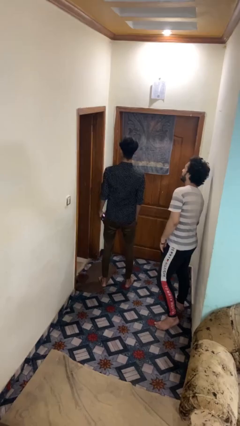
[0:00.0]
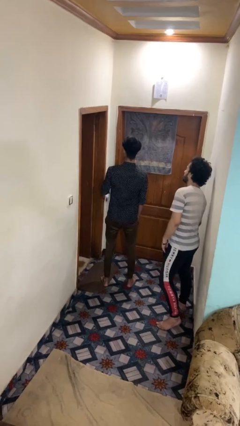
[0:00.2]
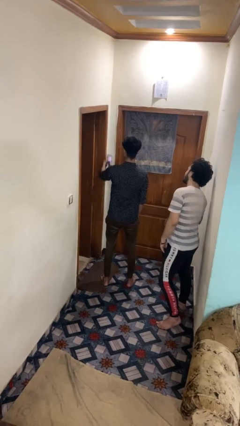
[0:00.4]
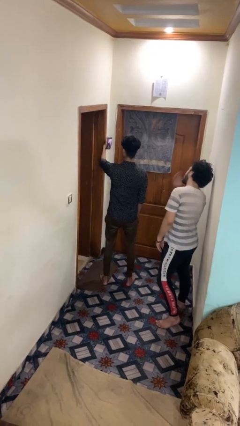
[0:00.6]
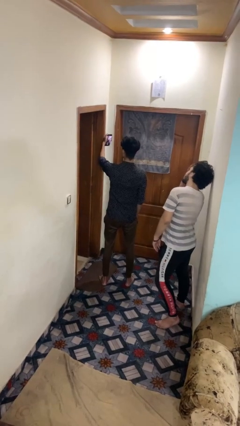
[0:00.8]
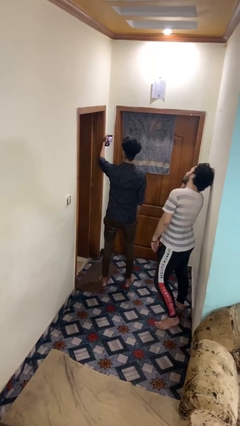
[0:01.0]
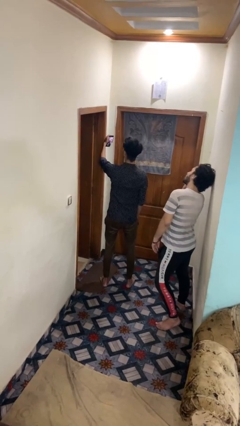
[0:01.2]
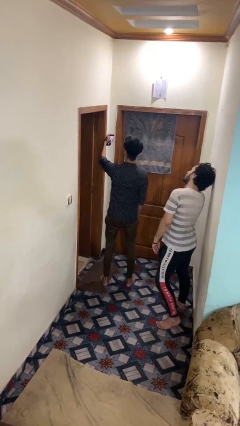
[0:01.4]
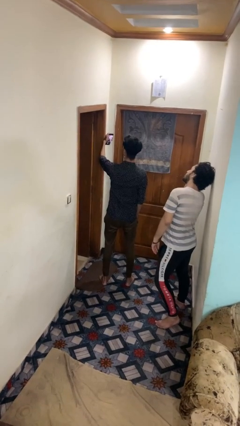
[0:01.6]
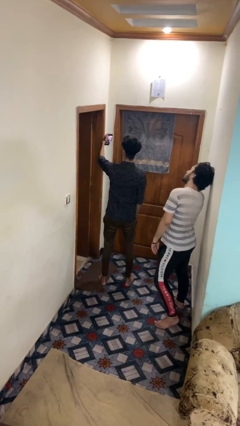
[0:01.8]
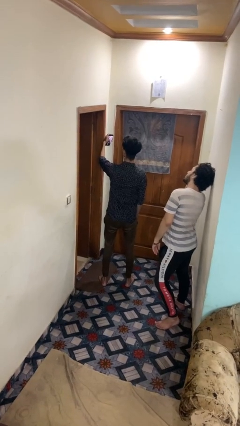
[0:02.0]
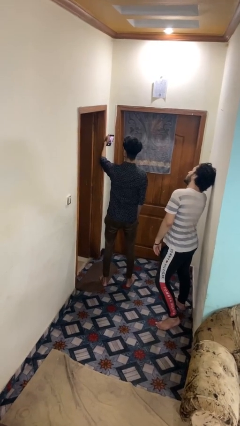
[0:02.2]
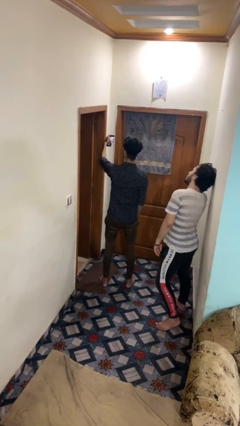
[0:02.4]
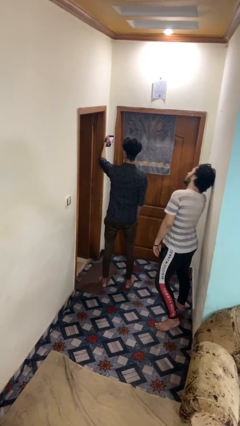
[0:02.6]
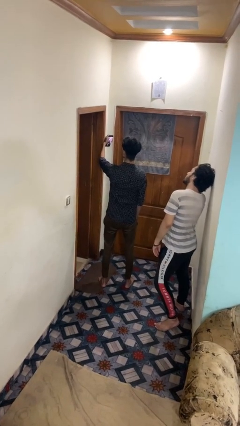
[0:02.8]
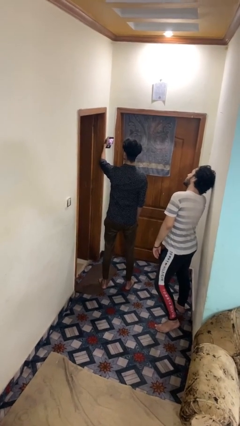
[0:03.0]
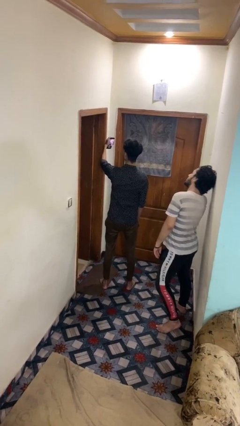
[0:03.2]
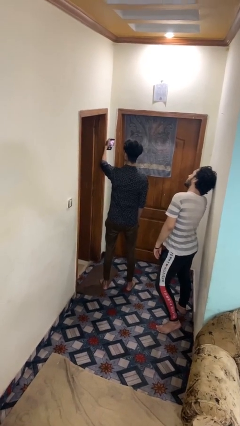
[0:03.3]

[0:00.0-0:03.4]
person takes selfie with person

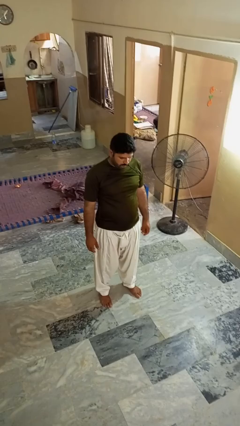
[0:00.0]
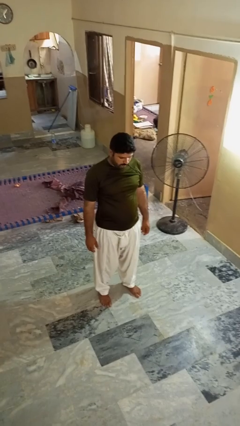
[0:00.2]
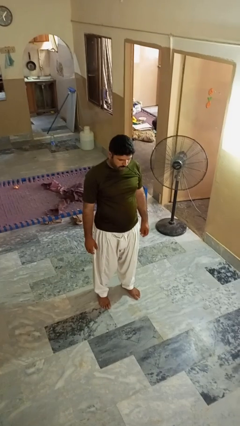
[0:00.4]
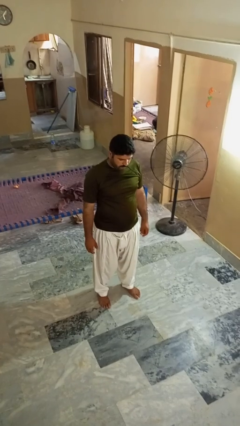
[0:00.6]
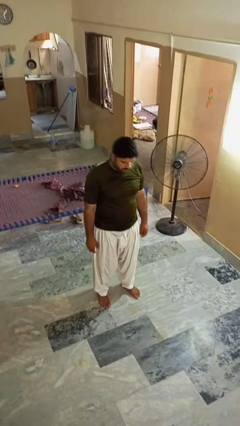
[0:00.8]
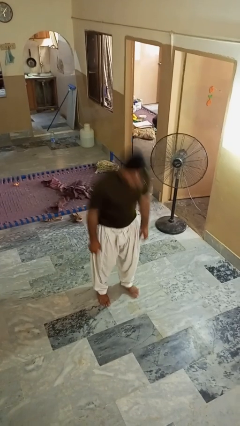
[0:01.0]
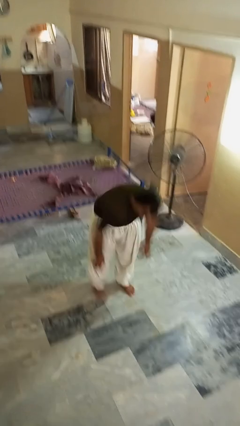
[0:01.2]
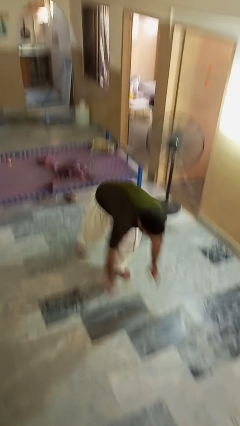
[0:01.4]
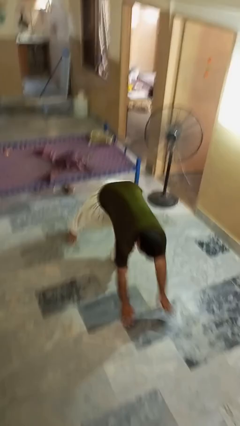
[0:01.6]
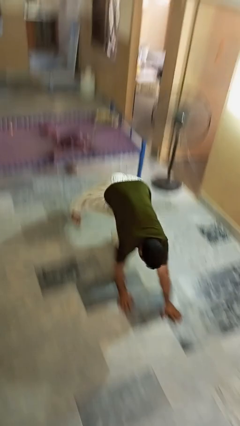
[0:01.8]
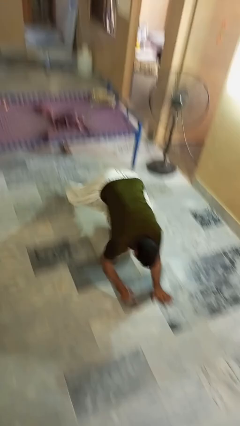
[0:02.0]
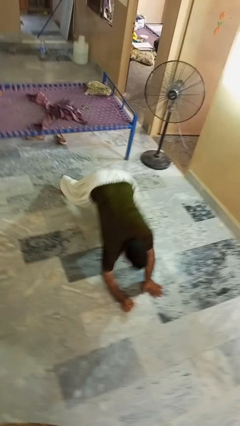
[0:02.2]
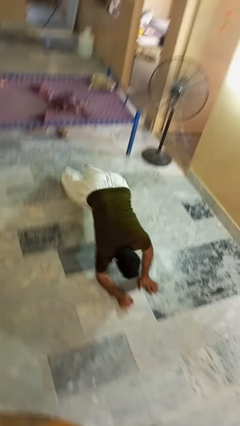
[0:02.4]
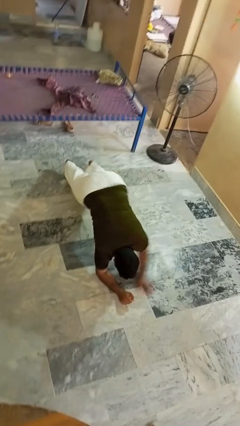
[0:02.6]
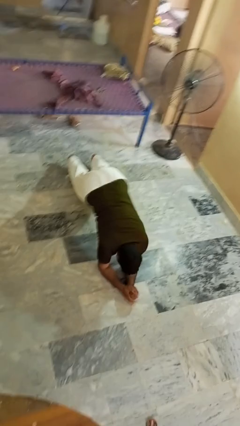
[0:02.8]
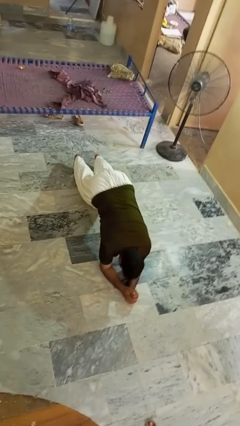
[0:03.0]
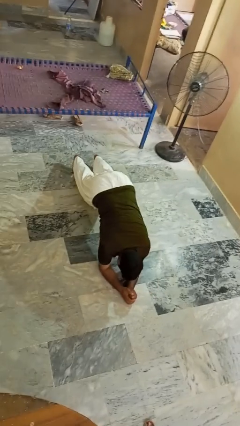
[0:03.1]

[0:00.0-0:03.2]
person exercises with plank

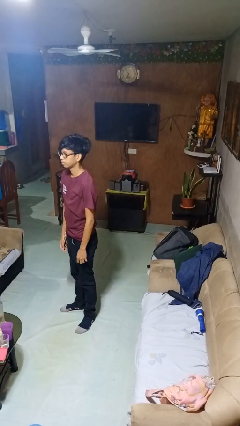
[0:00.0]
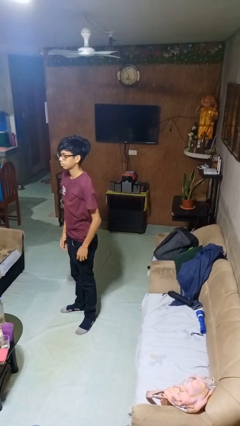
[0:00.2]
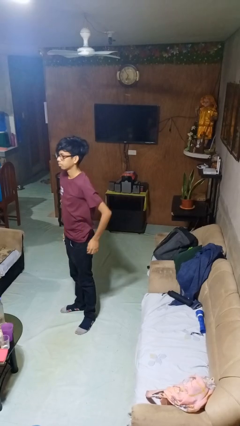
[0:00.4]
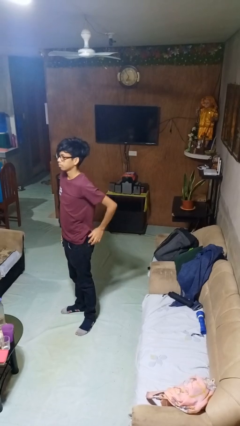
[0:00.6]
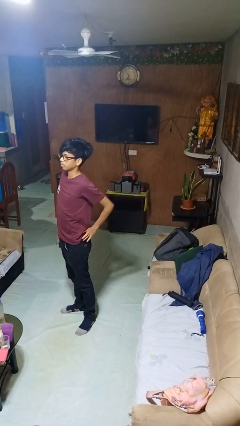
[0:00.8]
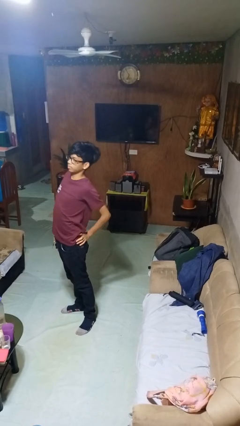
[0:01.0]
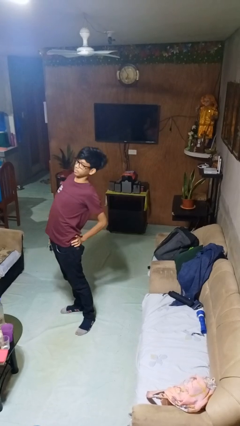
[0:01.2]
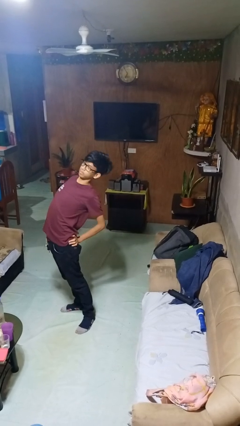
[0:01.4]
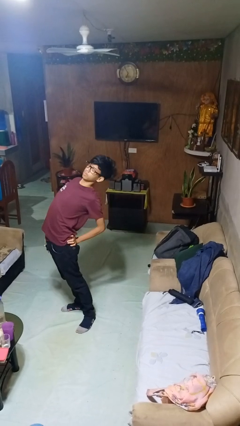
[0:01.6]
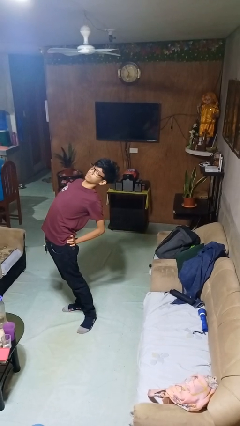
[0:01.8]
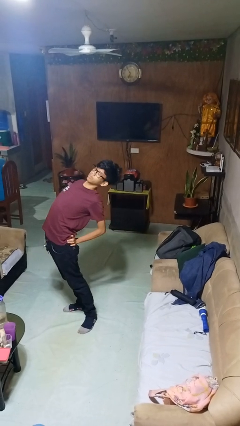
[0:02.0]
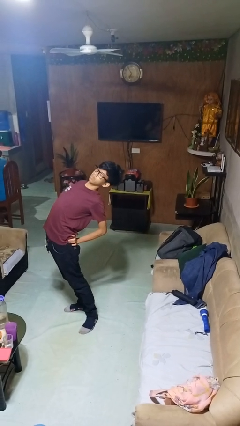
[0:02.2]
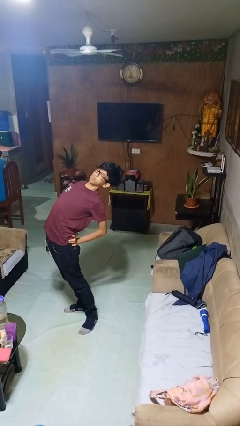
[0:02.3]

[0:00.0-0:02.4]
person stretches back

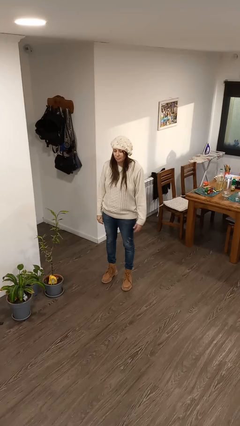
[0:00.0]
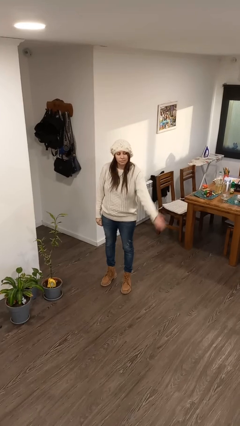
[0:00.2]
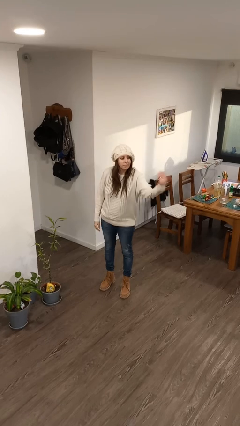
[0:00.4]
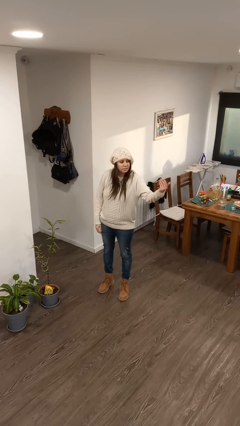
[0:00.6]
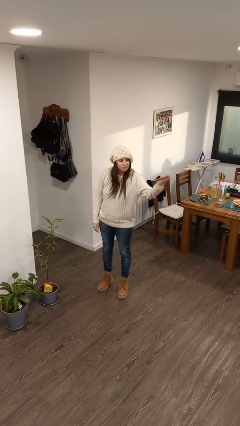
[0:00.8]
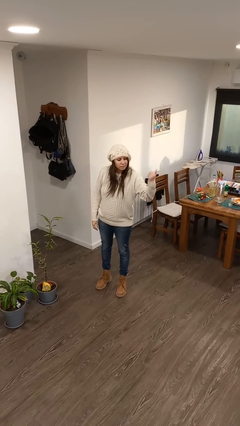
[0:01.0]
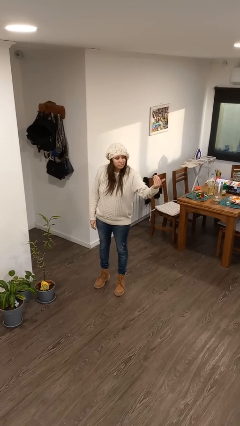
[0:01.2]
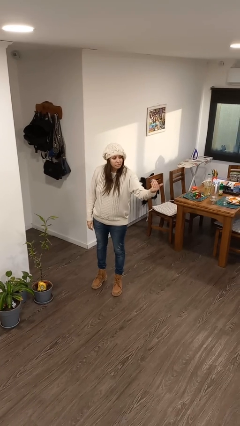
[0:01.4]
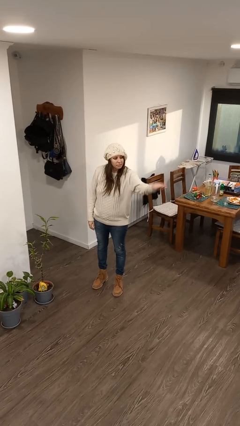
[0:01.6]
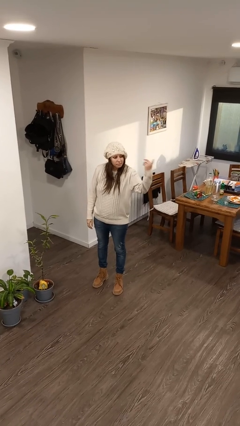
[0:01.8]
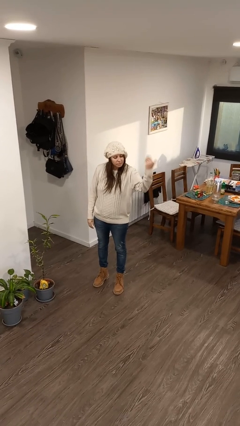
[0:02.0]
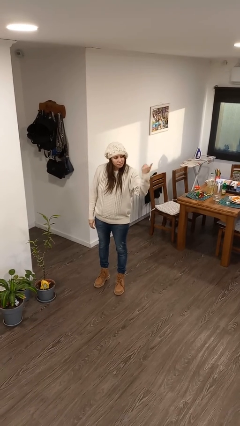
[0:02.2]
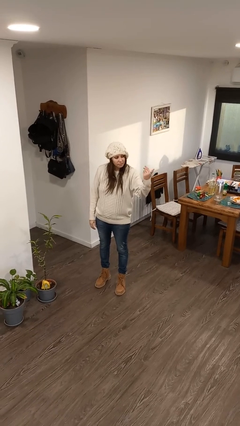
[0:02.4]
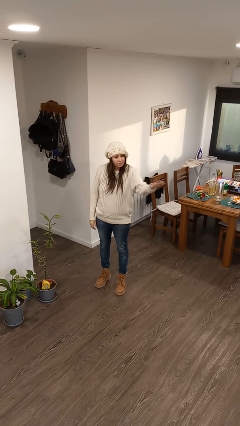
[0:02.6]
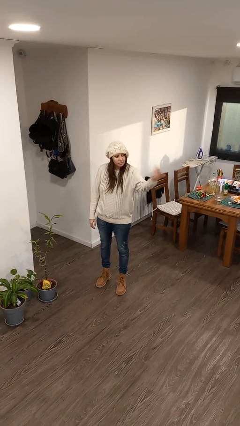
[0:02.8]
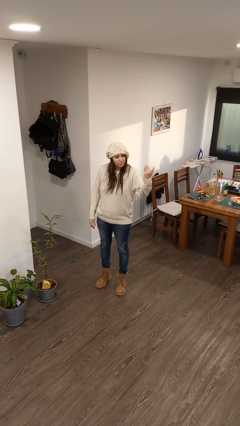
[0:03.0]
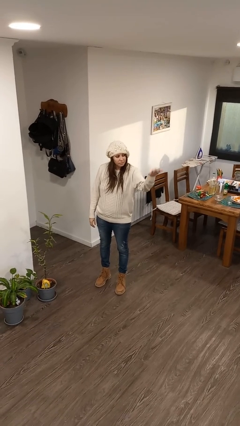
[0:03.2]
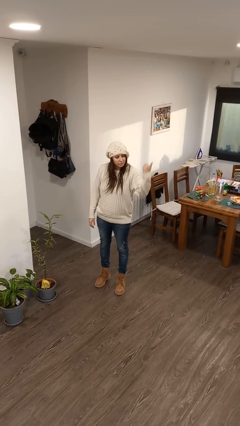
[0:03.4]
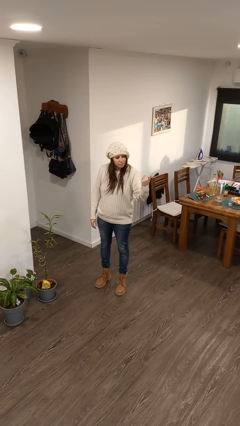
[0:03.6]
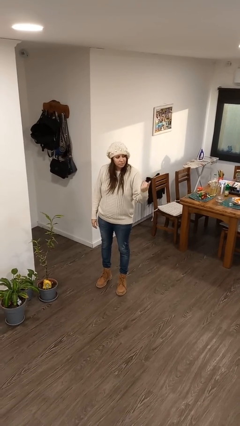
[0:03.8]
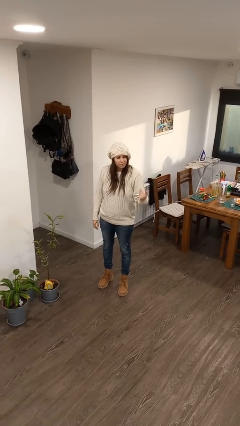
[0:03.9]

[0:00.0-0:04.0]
person gestures come here

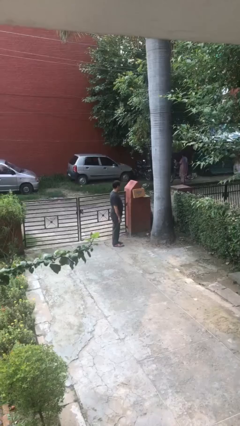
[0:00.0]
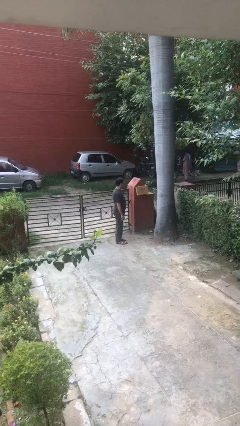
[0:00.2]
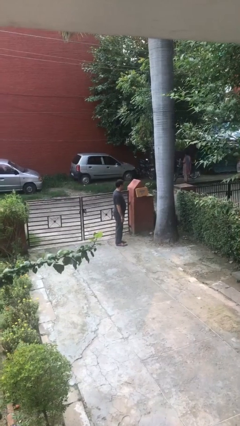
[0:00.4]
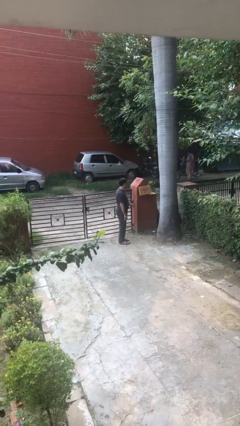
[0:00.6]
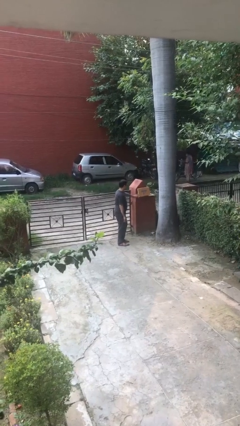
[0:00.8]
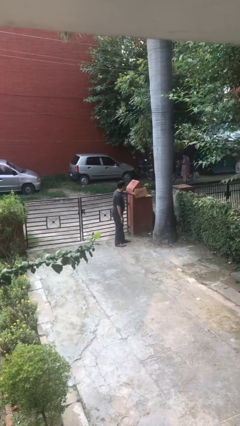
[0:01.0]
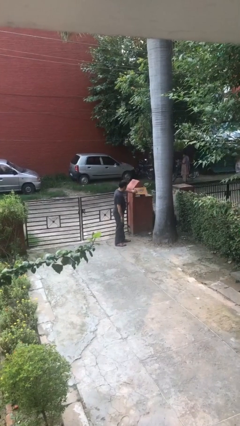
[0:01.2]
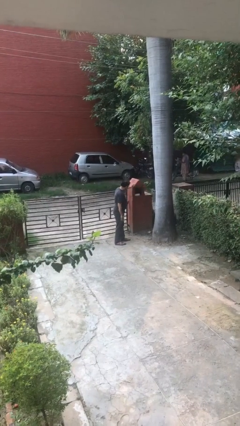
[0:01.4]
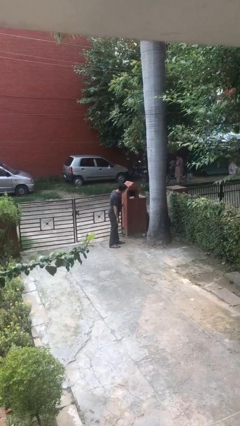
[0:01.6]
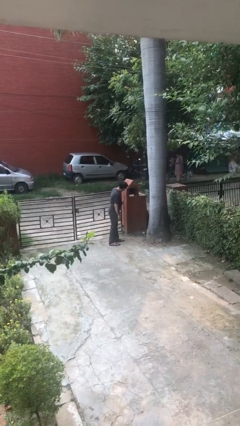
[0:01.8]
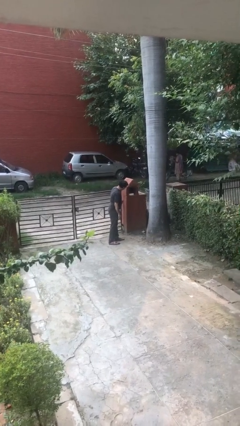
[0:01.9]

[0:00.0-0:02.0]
person opens mailbox

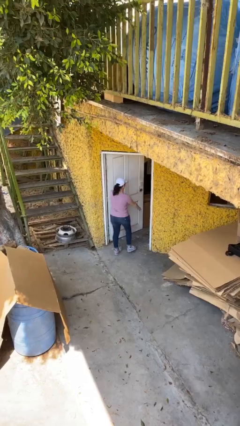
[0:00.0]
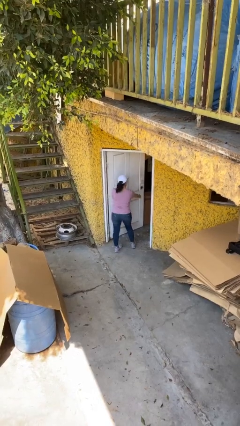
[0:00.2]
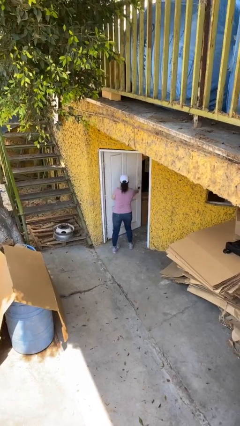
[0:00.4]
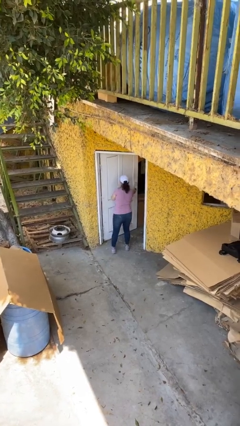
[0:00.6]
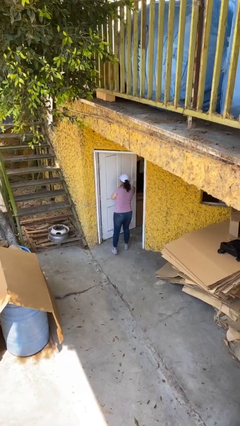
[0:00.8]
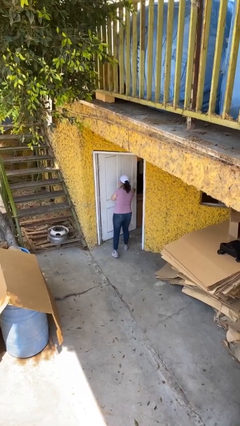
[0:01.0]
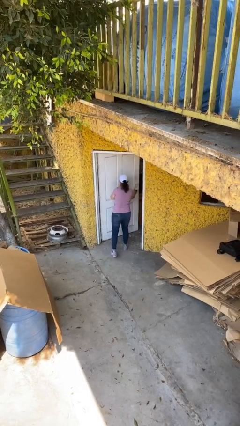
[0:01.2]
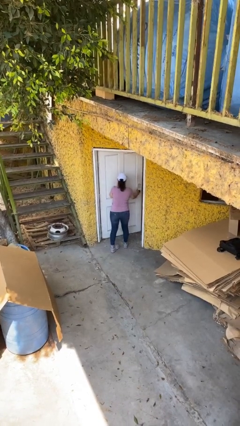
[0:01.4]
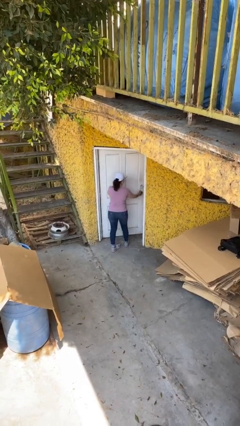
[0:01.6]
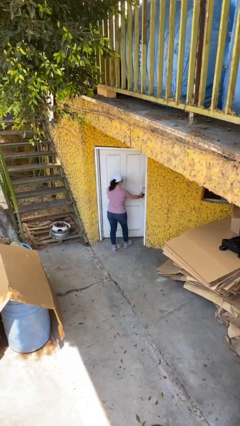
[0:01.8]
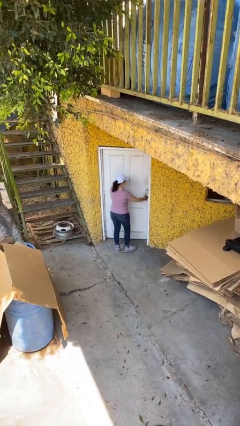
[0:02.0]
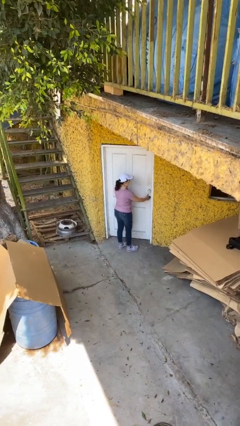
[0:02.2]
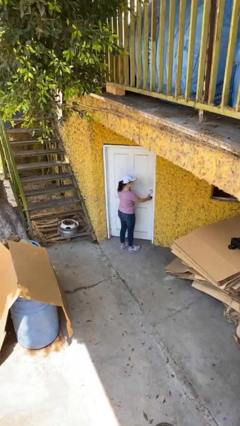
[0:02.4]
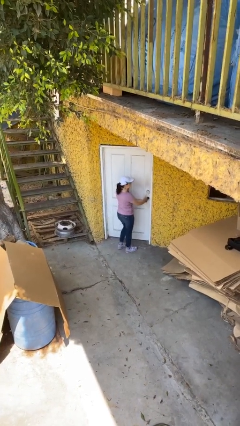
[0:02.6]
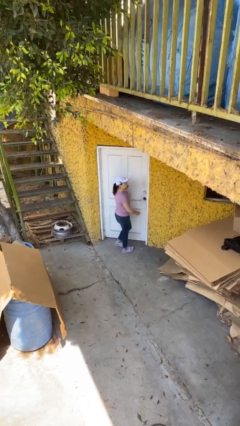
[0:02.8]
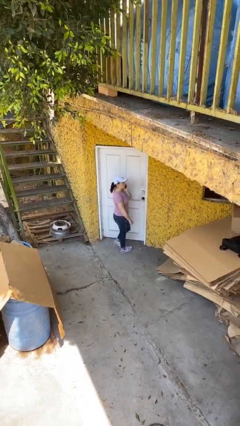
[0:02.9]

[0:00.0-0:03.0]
person closes facility door
